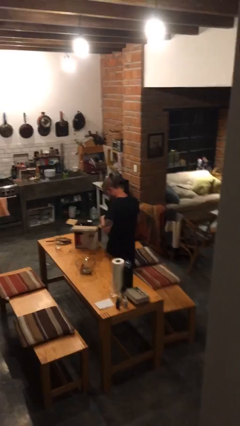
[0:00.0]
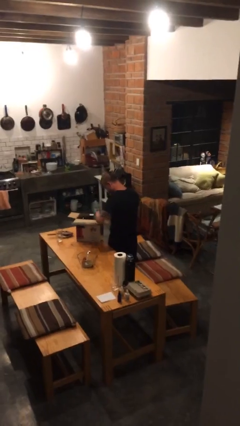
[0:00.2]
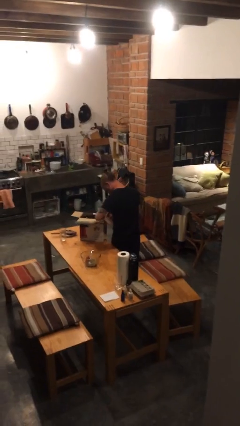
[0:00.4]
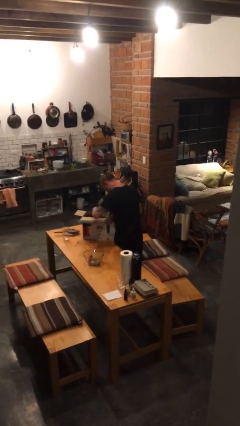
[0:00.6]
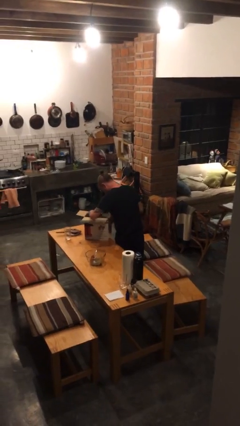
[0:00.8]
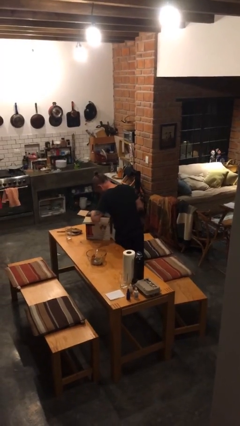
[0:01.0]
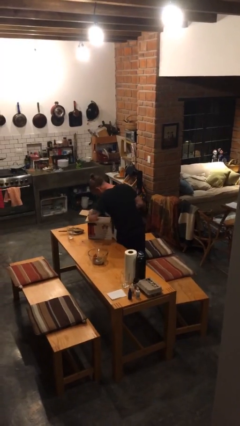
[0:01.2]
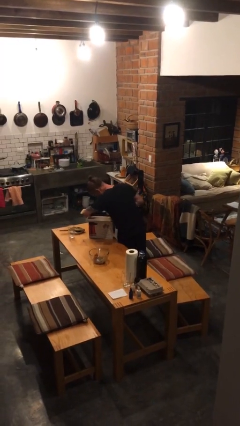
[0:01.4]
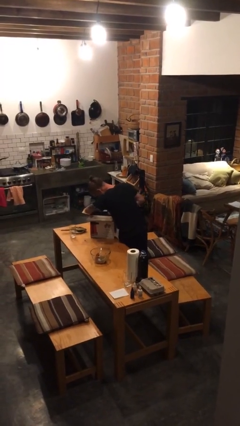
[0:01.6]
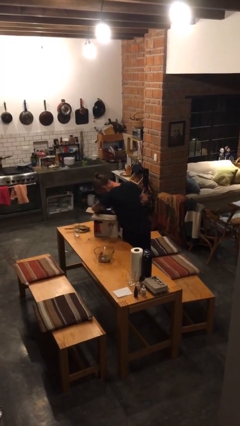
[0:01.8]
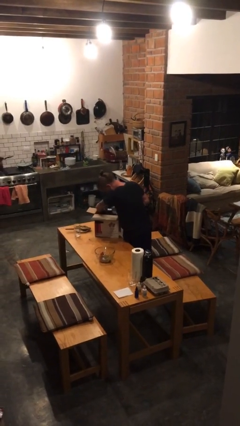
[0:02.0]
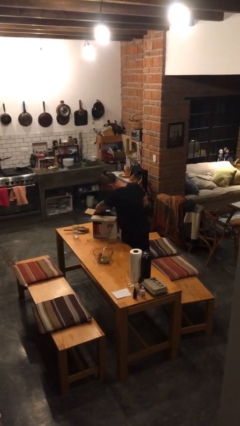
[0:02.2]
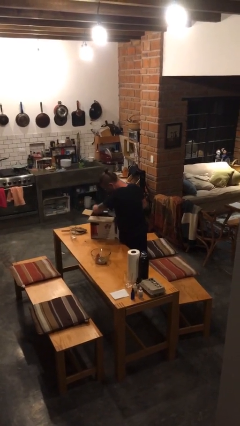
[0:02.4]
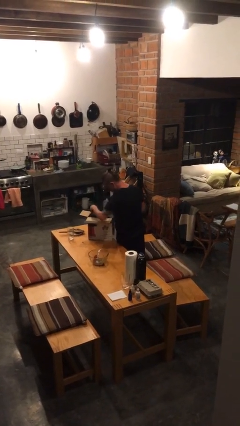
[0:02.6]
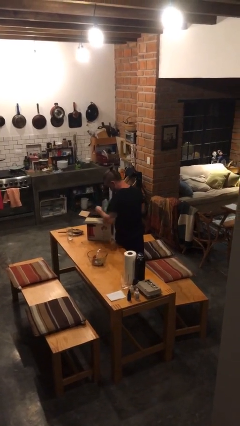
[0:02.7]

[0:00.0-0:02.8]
person searches in box

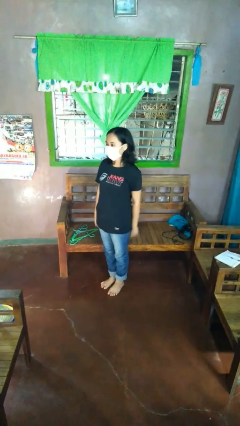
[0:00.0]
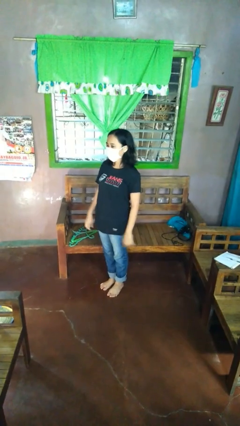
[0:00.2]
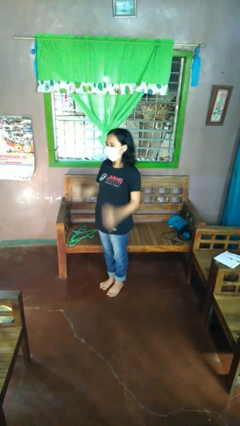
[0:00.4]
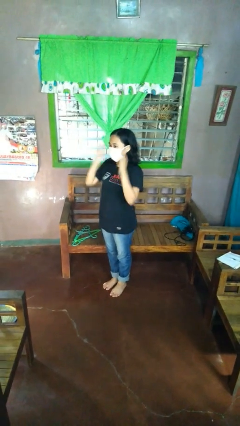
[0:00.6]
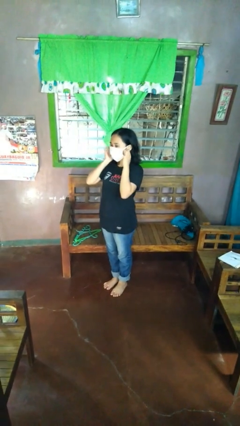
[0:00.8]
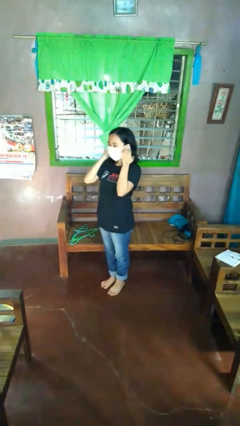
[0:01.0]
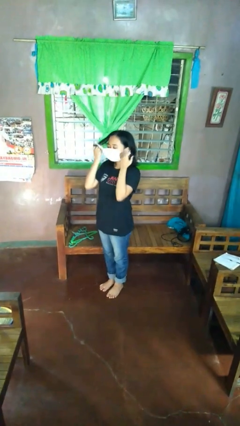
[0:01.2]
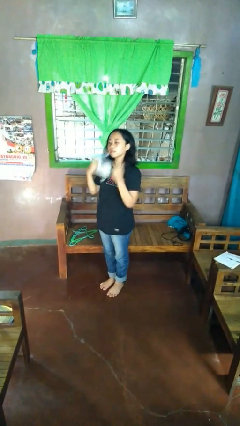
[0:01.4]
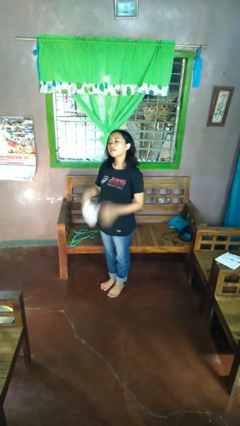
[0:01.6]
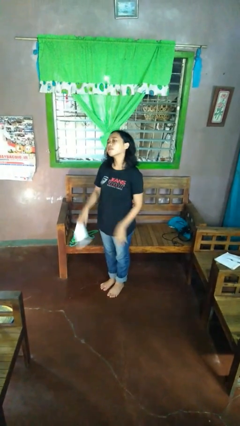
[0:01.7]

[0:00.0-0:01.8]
person takes off facemask

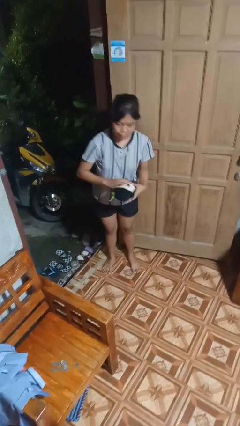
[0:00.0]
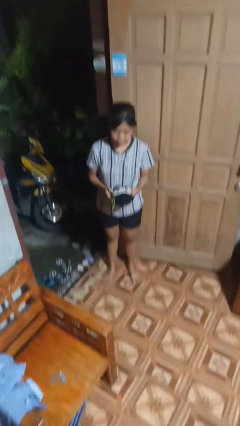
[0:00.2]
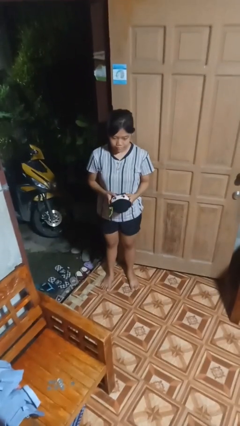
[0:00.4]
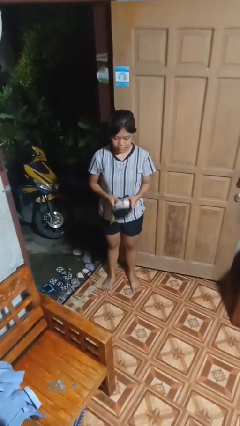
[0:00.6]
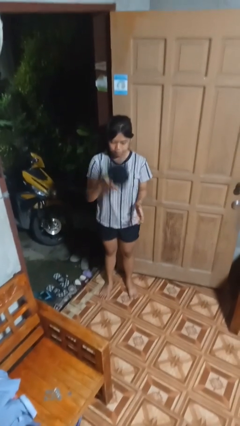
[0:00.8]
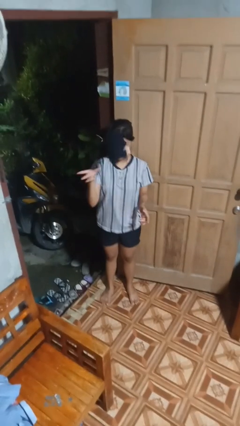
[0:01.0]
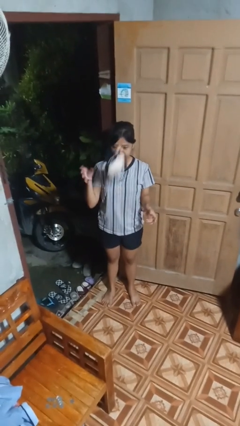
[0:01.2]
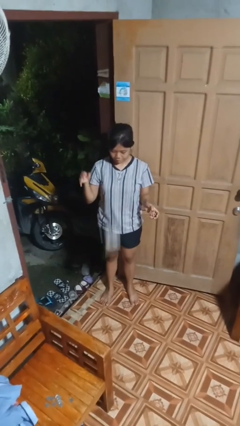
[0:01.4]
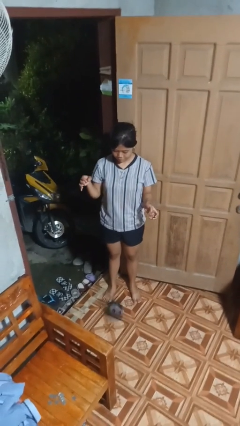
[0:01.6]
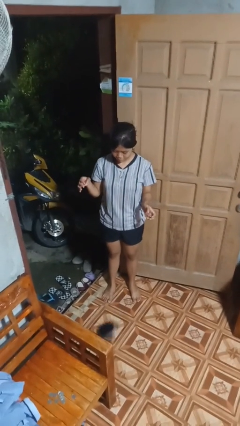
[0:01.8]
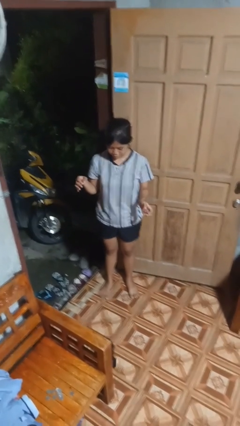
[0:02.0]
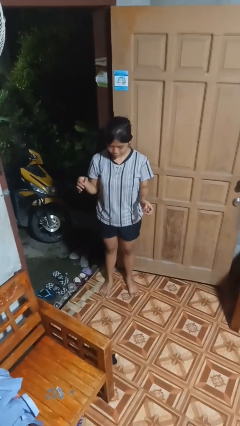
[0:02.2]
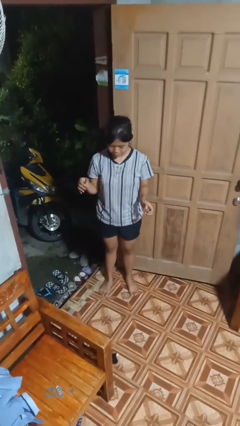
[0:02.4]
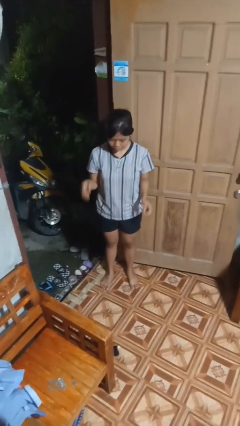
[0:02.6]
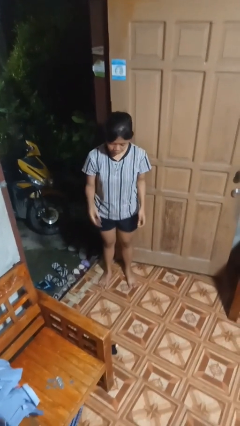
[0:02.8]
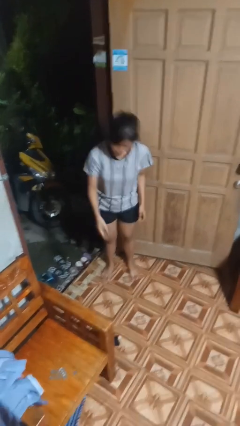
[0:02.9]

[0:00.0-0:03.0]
person throws object into air

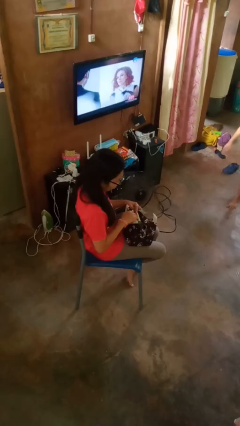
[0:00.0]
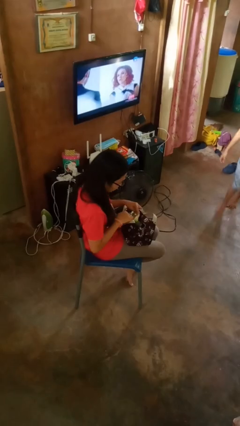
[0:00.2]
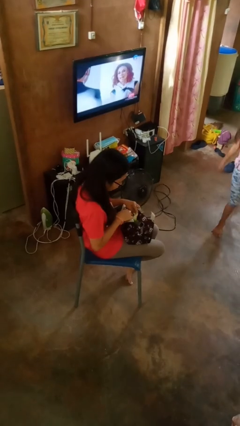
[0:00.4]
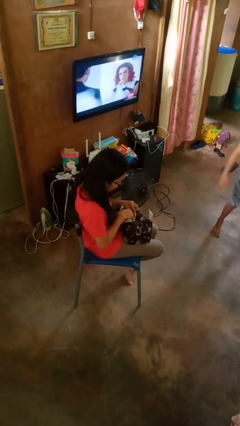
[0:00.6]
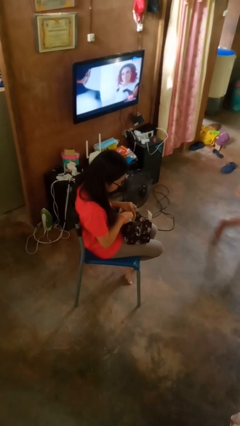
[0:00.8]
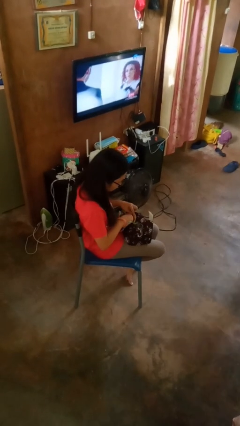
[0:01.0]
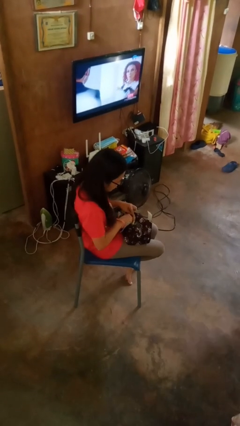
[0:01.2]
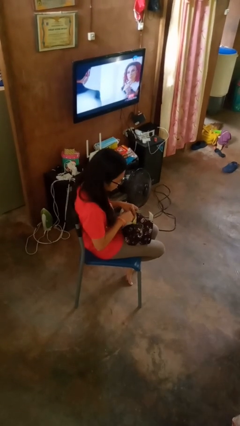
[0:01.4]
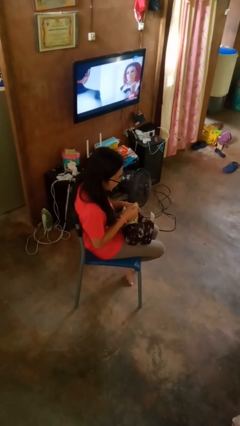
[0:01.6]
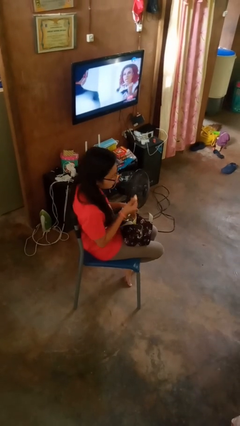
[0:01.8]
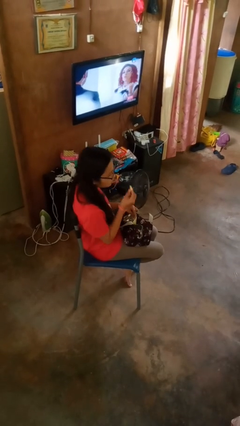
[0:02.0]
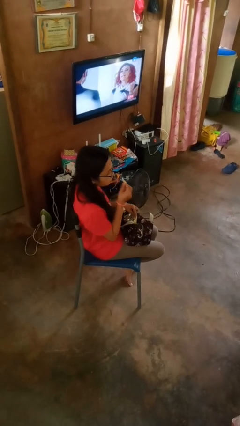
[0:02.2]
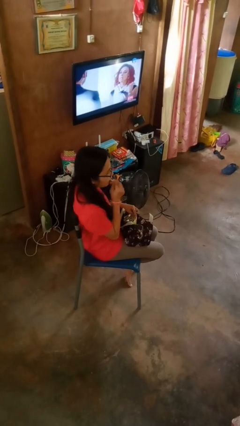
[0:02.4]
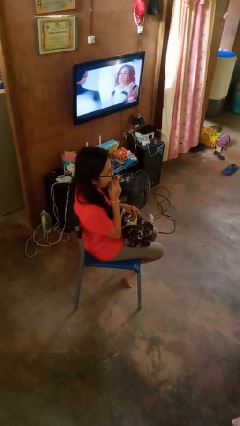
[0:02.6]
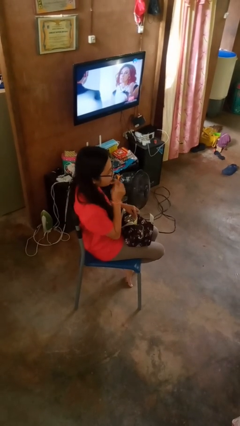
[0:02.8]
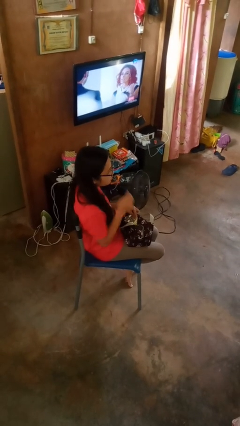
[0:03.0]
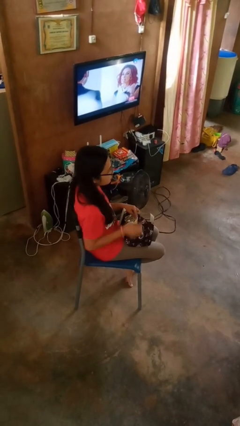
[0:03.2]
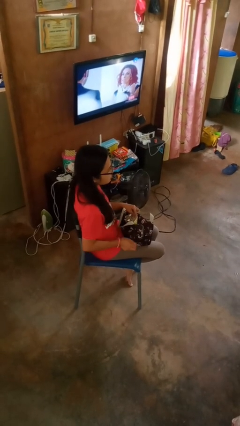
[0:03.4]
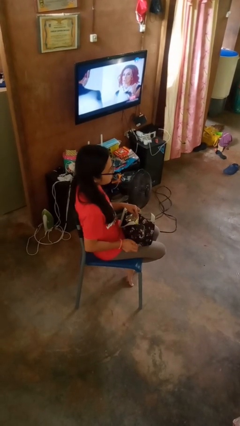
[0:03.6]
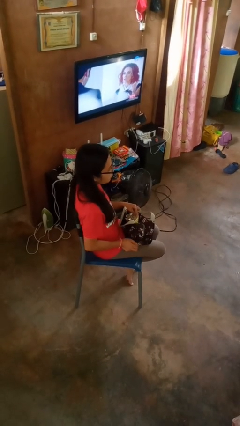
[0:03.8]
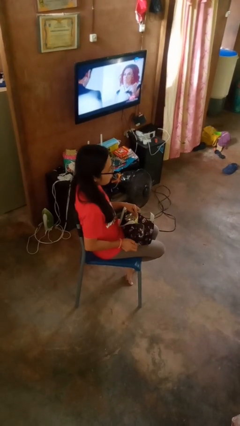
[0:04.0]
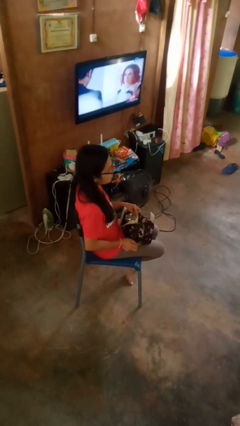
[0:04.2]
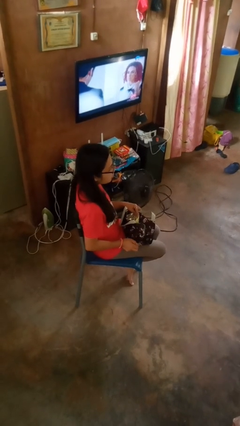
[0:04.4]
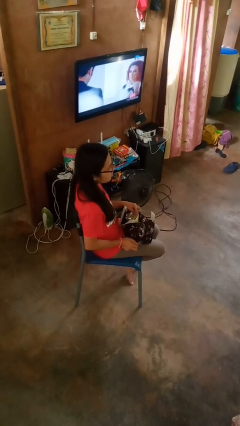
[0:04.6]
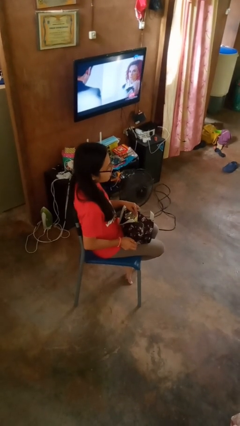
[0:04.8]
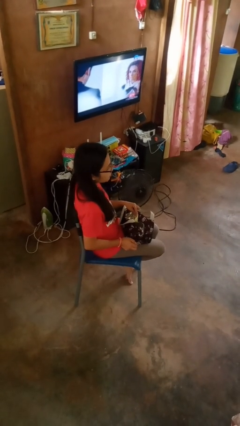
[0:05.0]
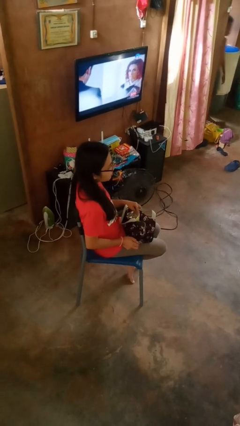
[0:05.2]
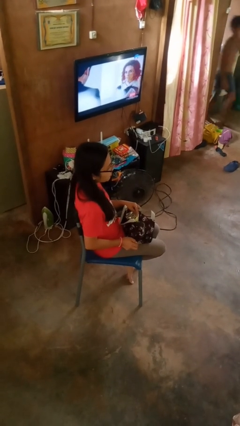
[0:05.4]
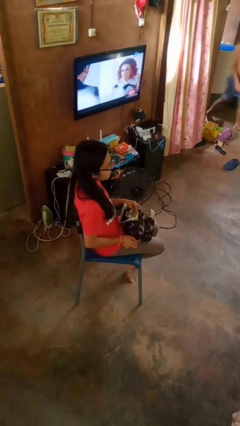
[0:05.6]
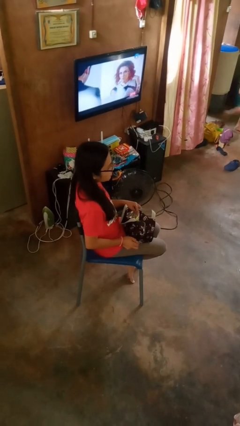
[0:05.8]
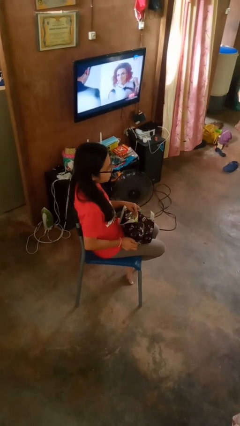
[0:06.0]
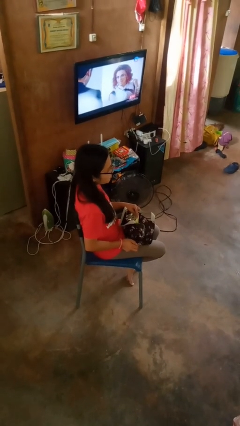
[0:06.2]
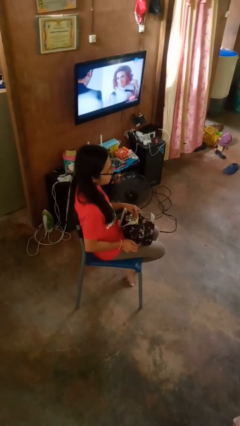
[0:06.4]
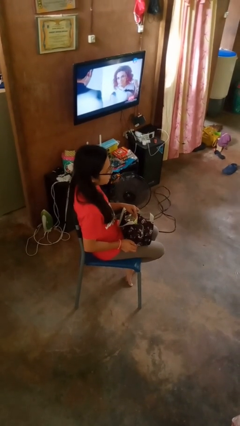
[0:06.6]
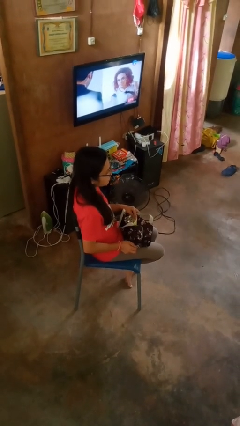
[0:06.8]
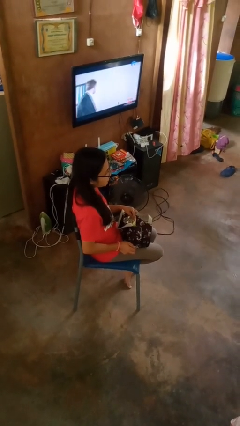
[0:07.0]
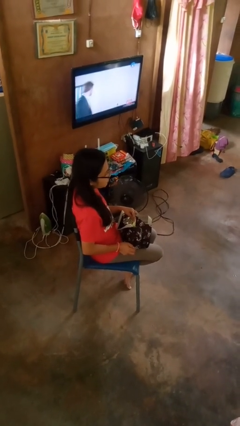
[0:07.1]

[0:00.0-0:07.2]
person eats snack from bag

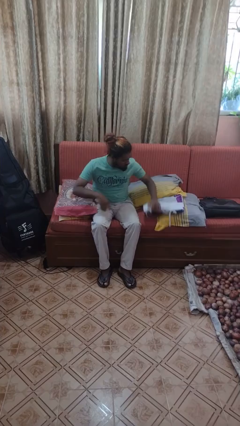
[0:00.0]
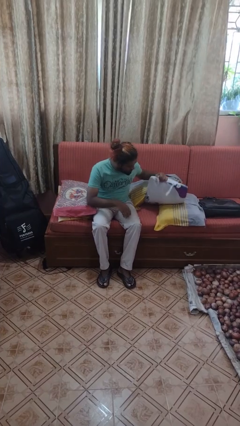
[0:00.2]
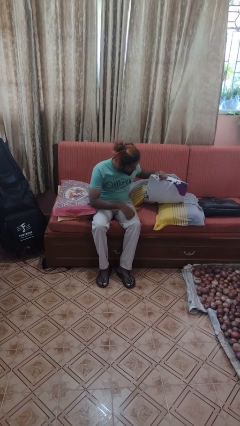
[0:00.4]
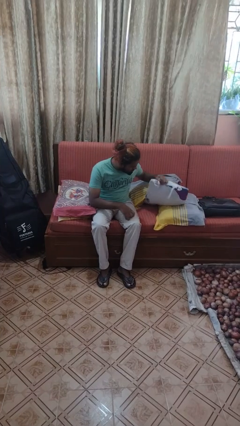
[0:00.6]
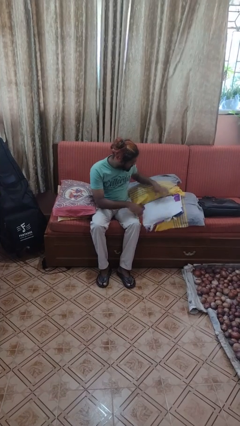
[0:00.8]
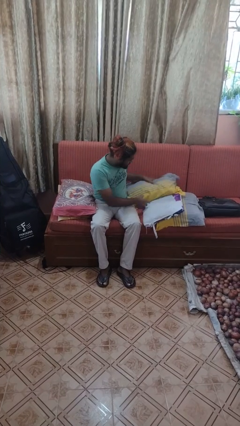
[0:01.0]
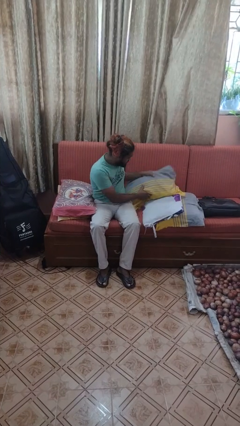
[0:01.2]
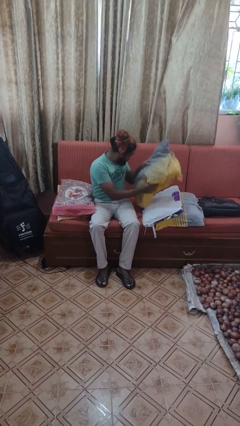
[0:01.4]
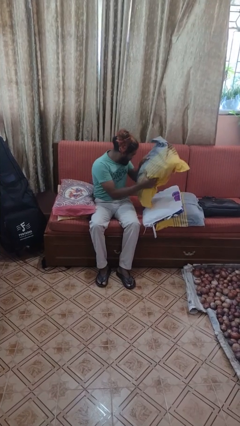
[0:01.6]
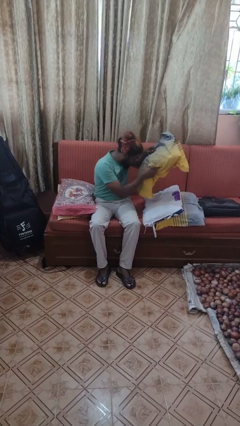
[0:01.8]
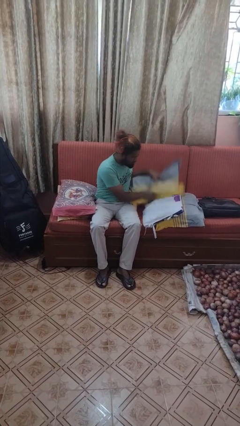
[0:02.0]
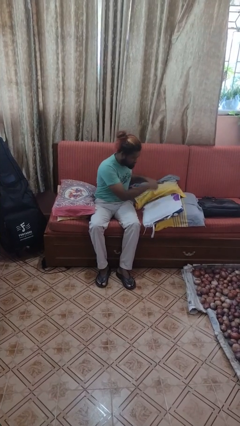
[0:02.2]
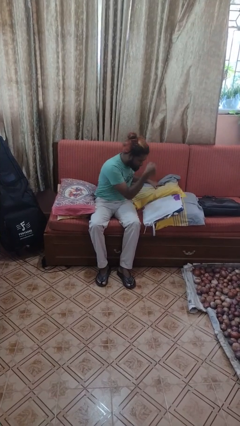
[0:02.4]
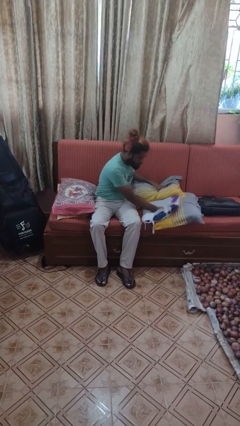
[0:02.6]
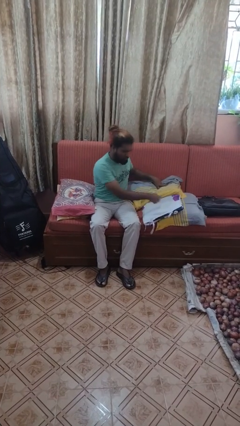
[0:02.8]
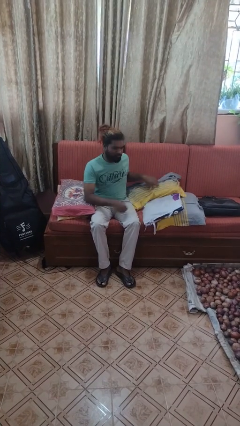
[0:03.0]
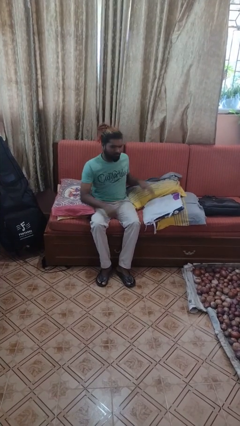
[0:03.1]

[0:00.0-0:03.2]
person searches in couch
